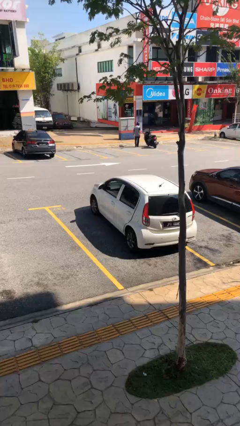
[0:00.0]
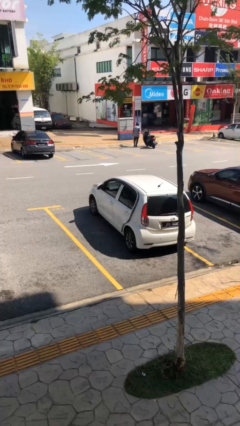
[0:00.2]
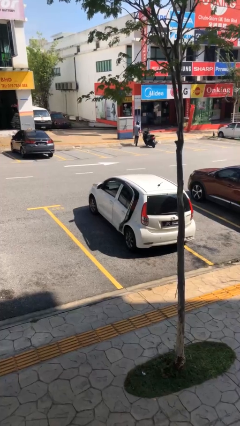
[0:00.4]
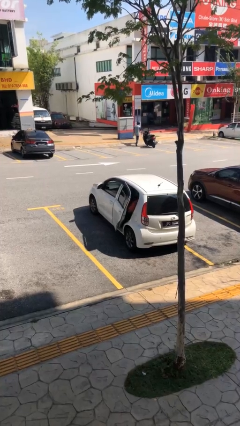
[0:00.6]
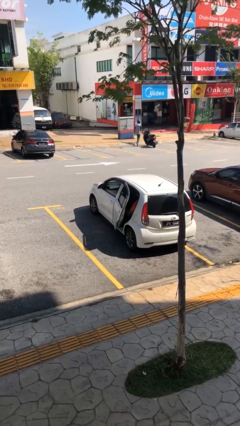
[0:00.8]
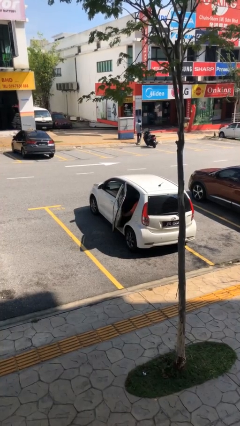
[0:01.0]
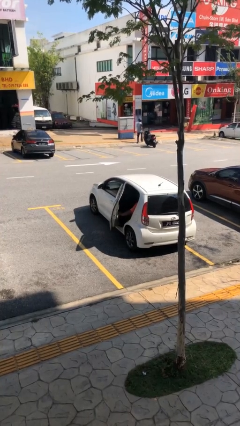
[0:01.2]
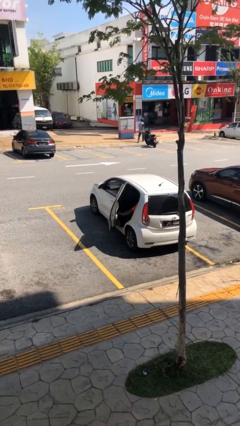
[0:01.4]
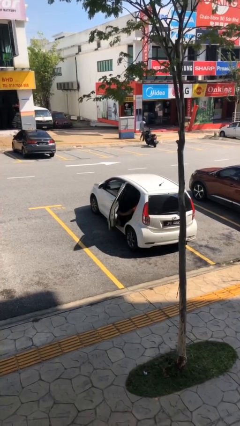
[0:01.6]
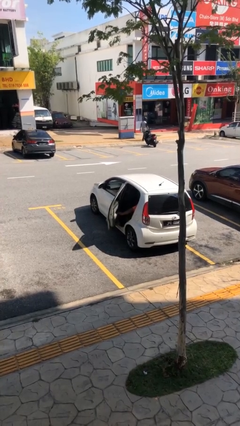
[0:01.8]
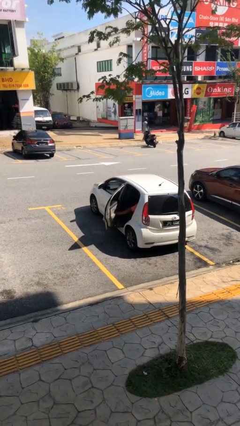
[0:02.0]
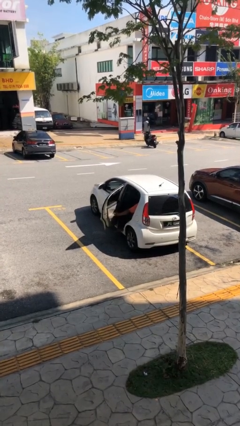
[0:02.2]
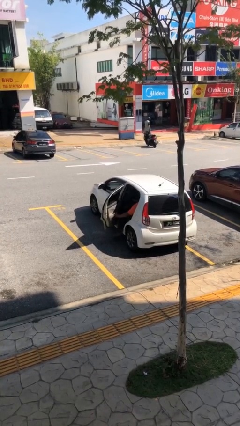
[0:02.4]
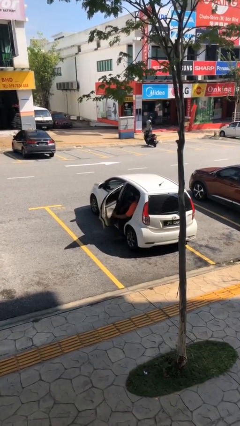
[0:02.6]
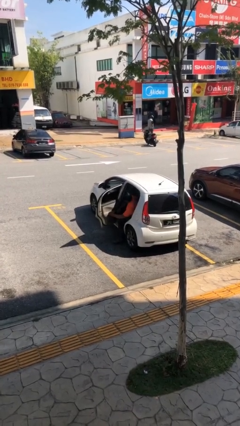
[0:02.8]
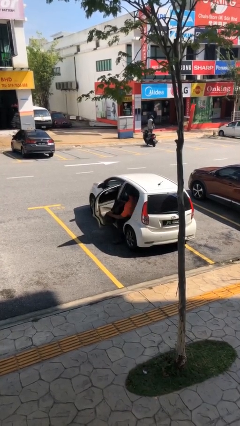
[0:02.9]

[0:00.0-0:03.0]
person opens car door

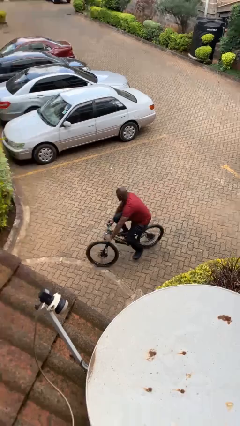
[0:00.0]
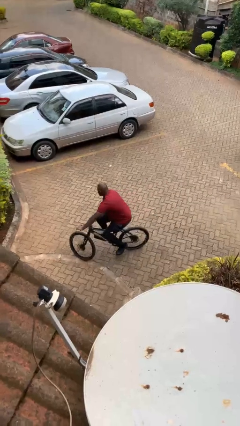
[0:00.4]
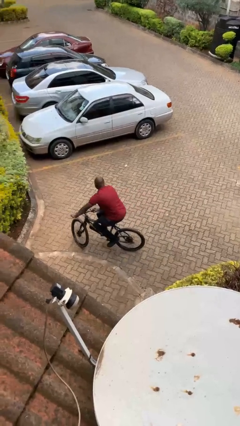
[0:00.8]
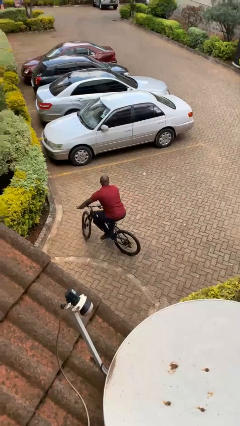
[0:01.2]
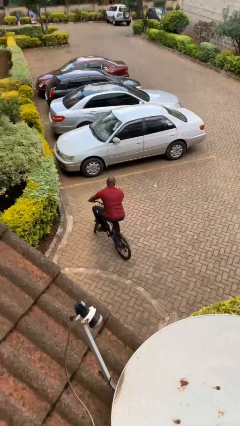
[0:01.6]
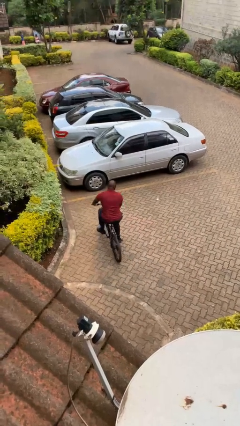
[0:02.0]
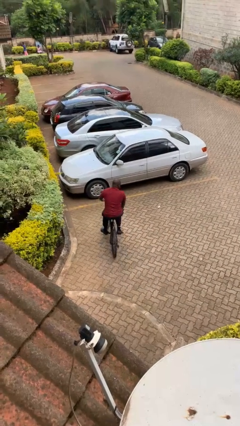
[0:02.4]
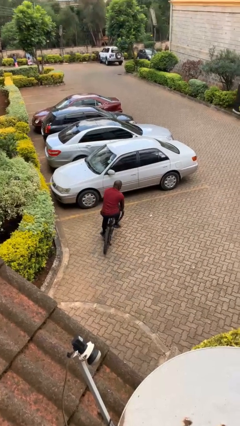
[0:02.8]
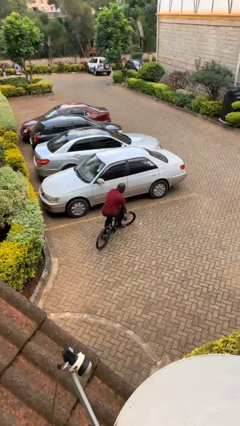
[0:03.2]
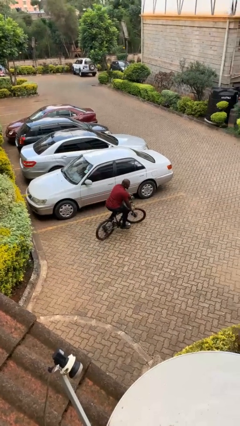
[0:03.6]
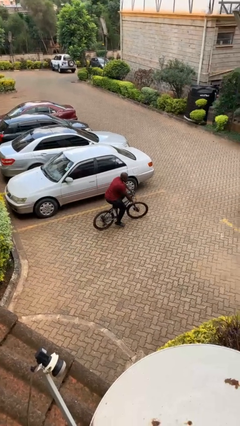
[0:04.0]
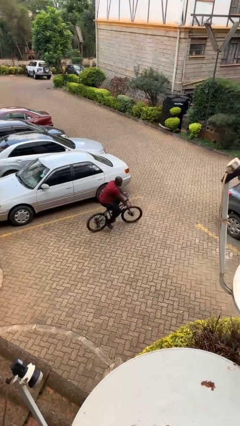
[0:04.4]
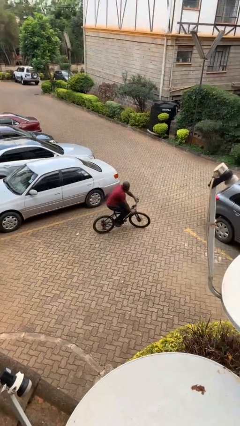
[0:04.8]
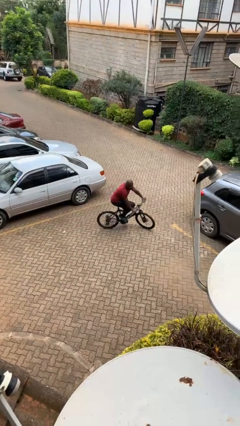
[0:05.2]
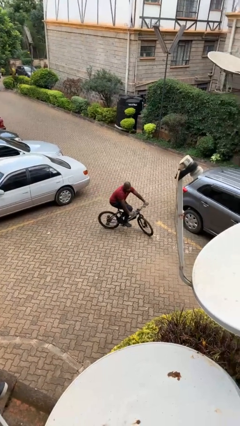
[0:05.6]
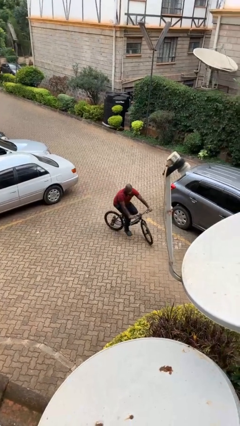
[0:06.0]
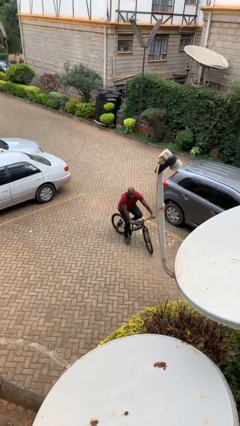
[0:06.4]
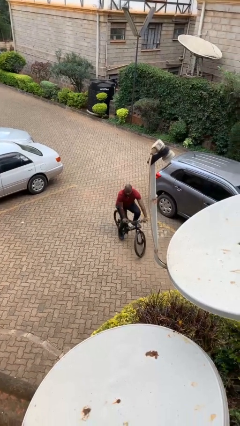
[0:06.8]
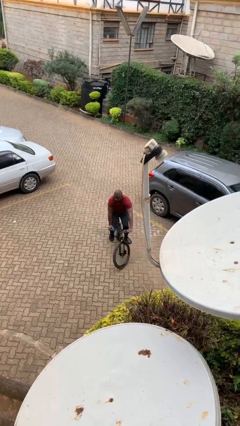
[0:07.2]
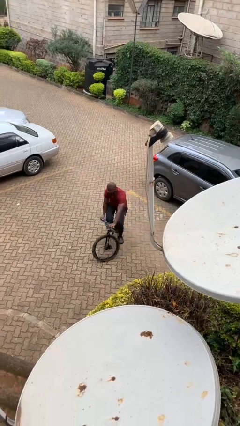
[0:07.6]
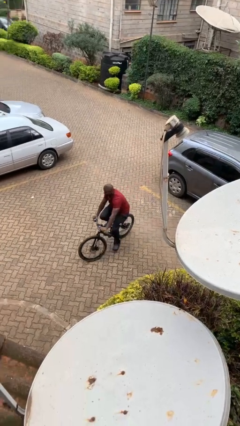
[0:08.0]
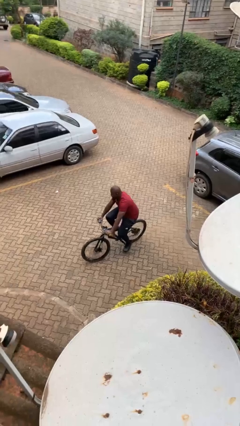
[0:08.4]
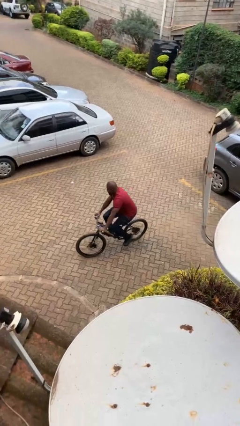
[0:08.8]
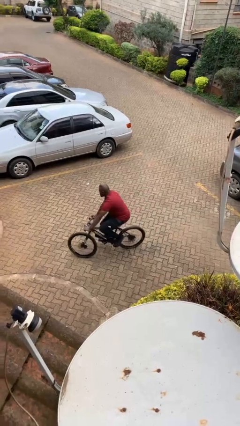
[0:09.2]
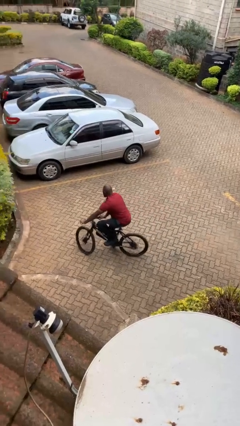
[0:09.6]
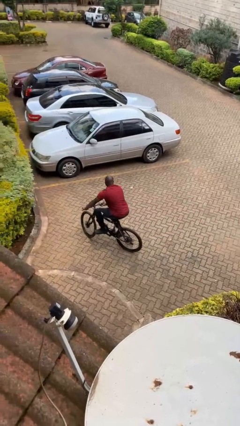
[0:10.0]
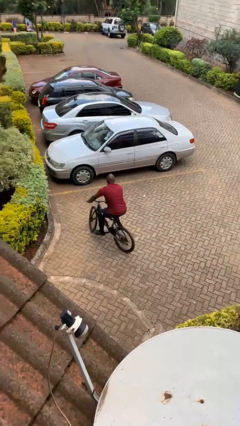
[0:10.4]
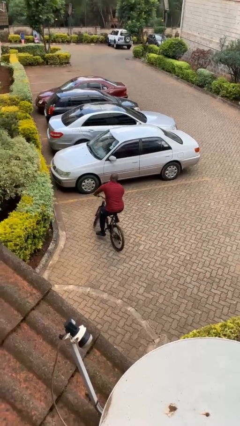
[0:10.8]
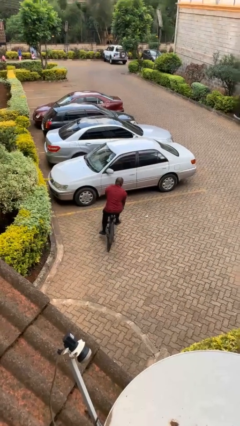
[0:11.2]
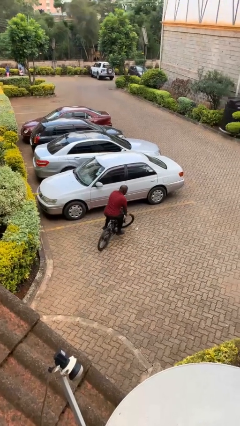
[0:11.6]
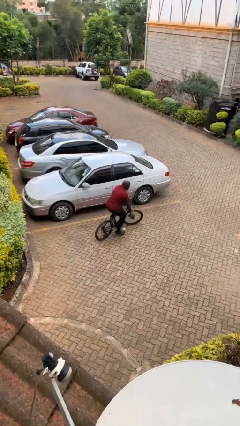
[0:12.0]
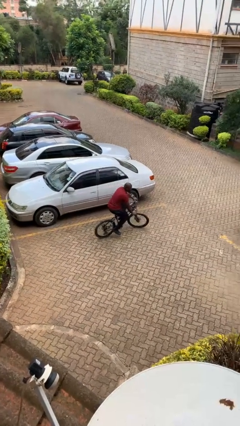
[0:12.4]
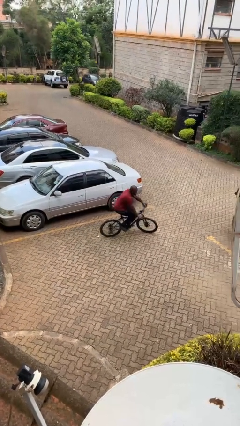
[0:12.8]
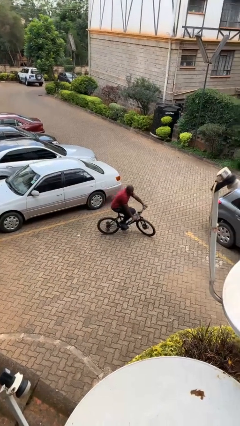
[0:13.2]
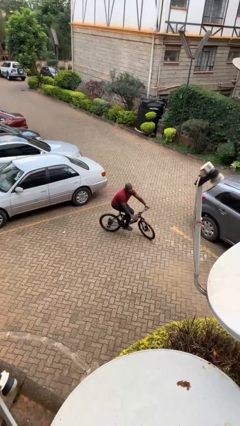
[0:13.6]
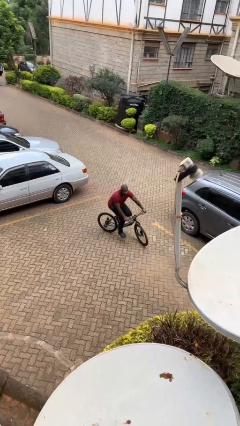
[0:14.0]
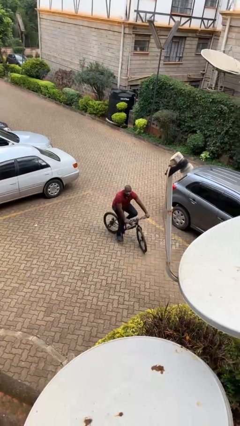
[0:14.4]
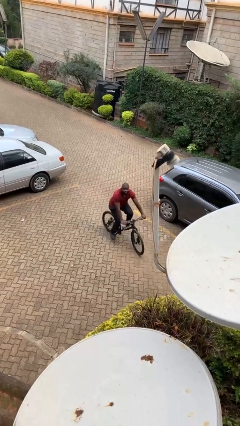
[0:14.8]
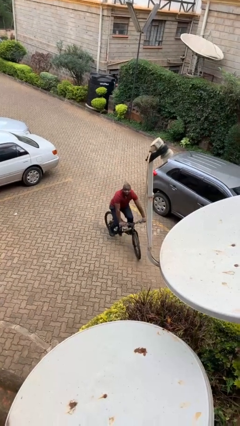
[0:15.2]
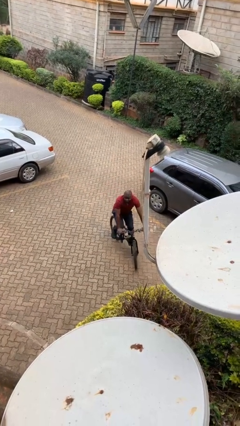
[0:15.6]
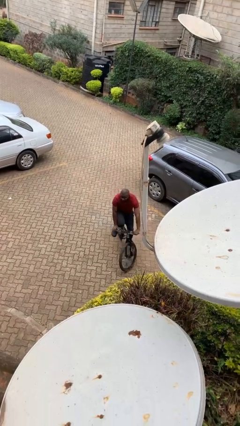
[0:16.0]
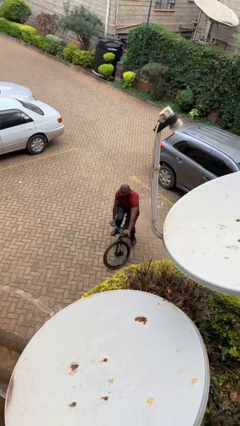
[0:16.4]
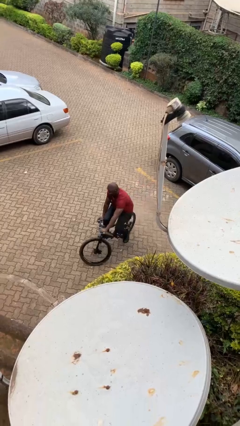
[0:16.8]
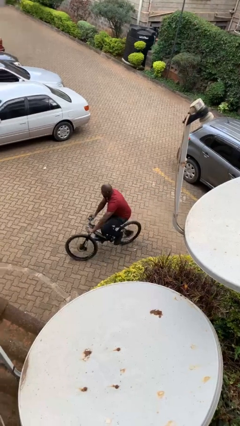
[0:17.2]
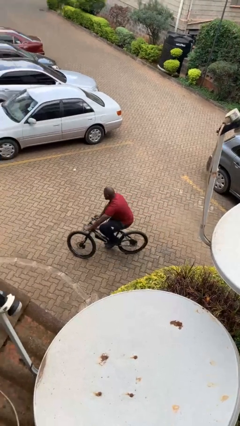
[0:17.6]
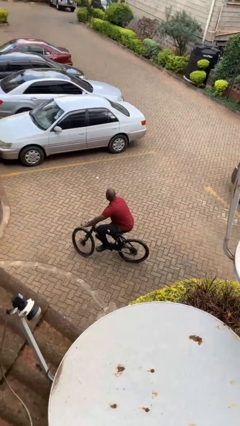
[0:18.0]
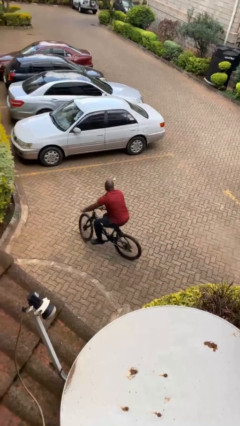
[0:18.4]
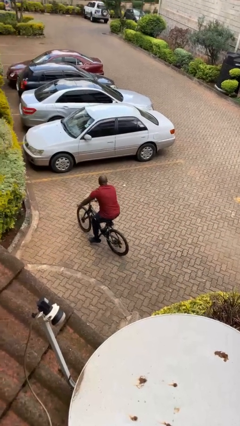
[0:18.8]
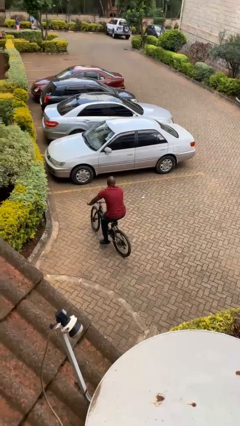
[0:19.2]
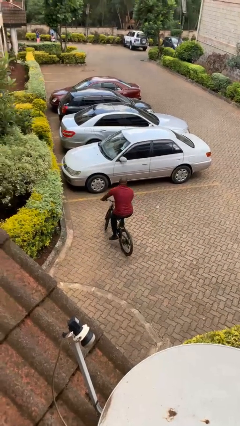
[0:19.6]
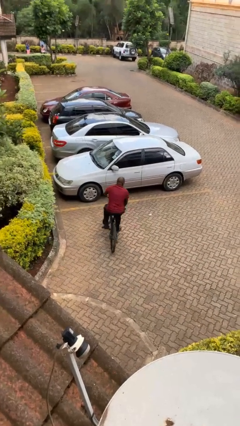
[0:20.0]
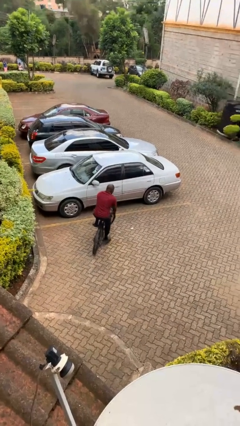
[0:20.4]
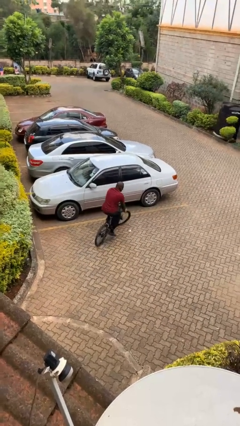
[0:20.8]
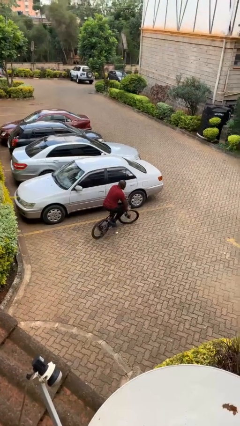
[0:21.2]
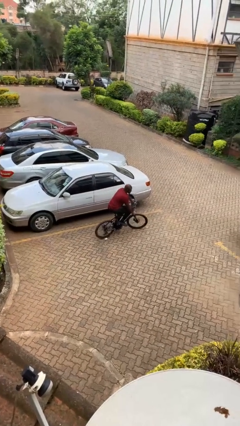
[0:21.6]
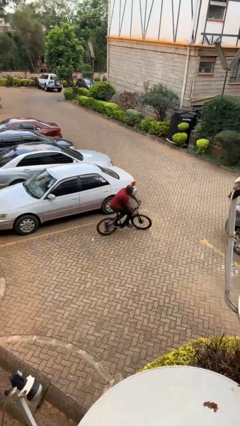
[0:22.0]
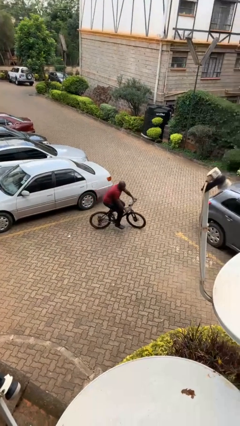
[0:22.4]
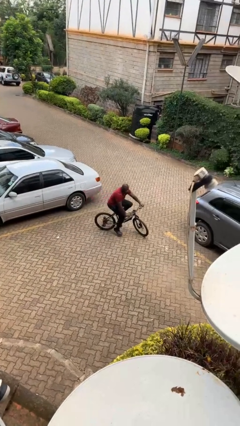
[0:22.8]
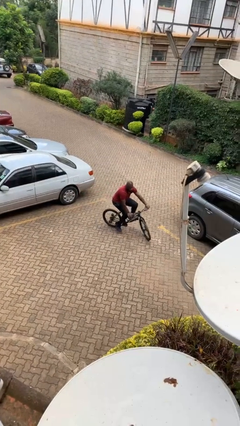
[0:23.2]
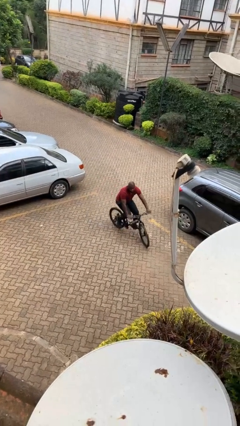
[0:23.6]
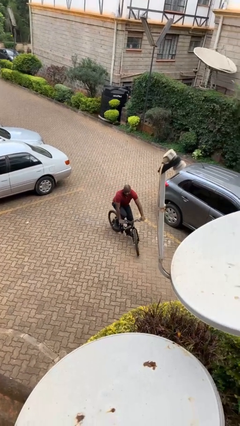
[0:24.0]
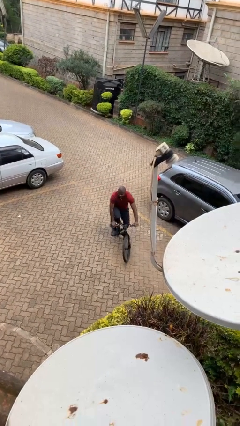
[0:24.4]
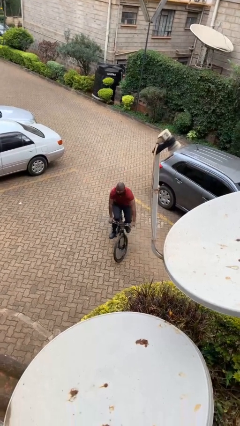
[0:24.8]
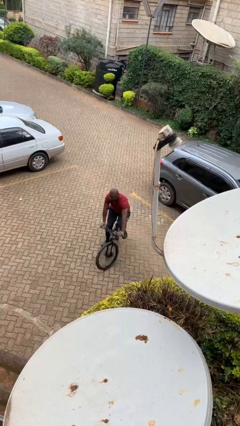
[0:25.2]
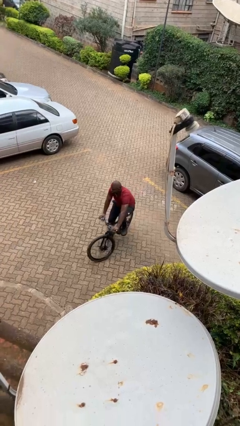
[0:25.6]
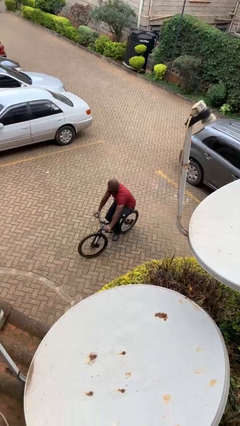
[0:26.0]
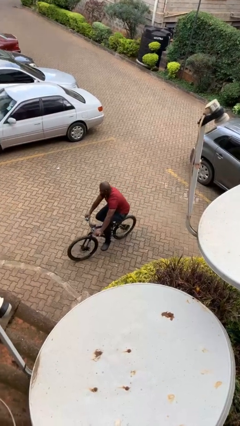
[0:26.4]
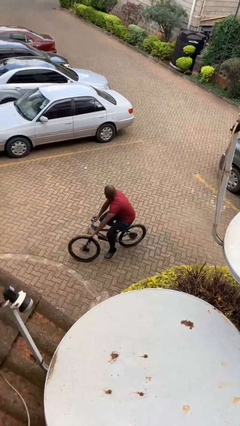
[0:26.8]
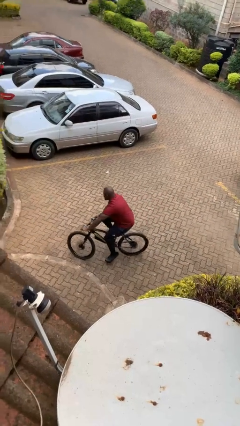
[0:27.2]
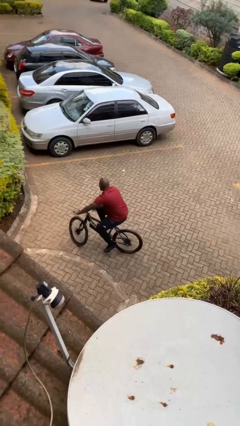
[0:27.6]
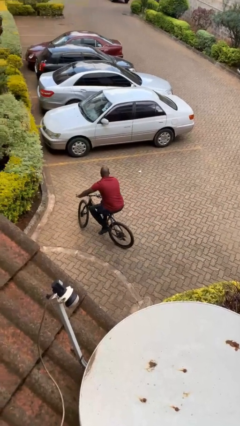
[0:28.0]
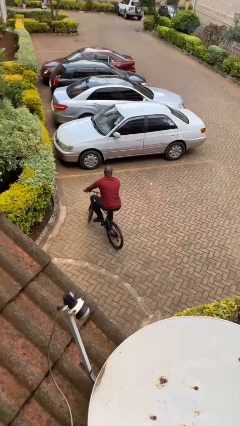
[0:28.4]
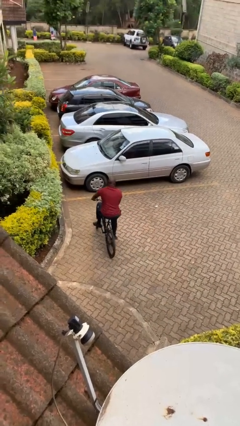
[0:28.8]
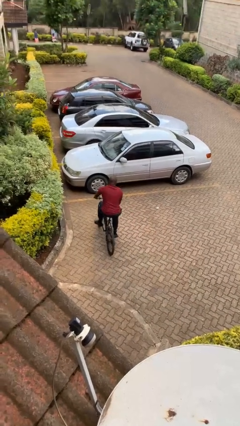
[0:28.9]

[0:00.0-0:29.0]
person rides bicycle

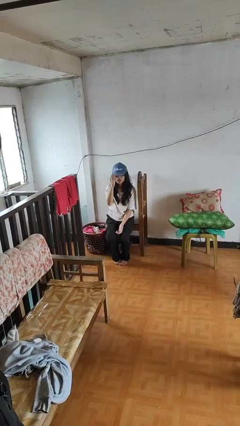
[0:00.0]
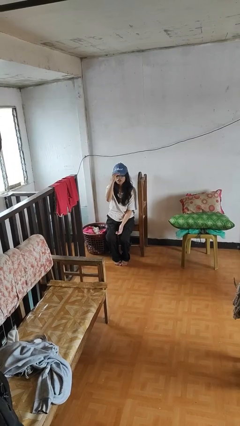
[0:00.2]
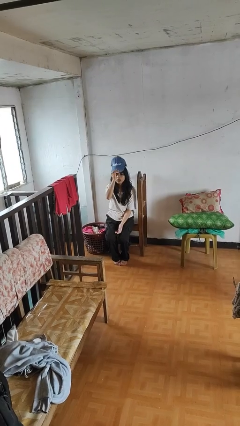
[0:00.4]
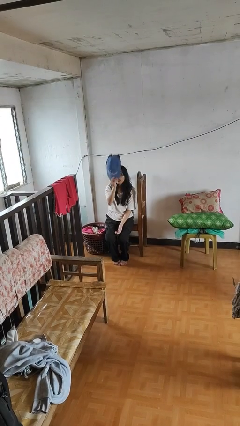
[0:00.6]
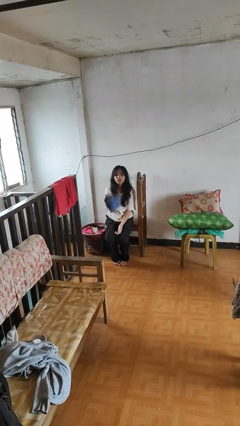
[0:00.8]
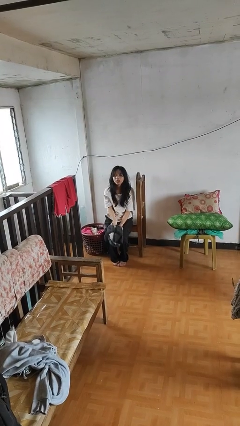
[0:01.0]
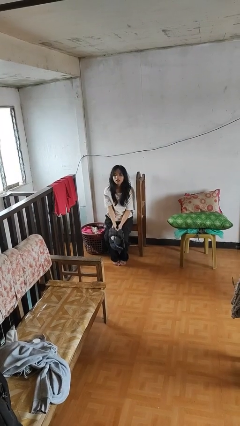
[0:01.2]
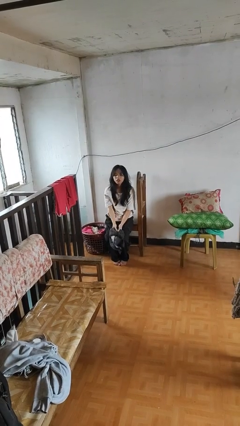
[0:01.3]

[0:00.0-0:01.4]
person takes off hat
